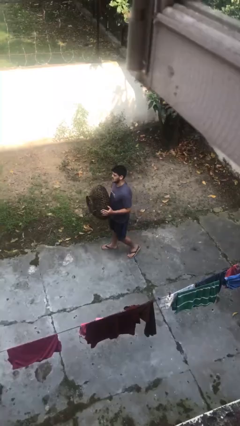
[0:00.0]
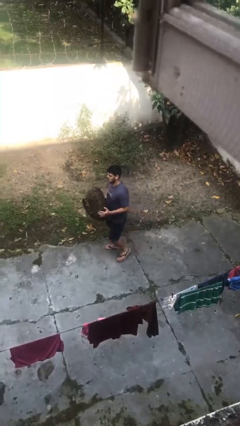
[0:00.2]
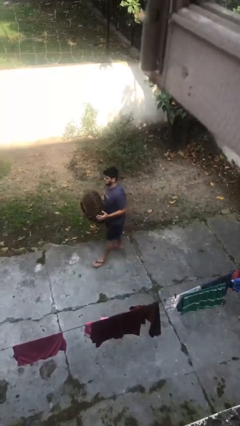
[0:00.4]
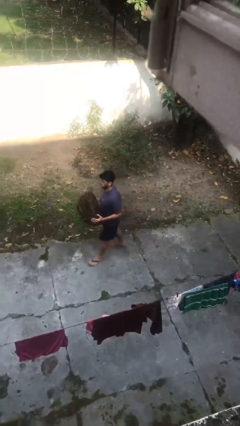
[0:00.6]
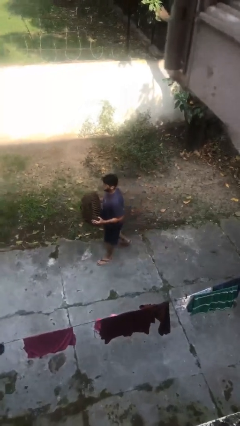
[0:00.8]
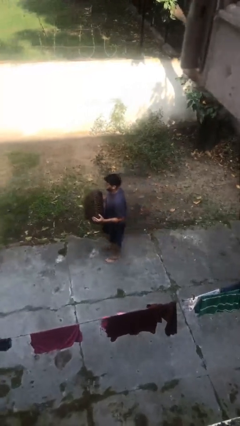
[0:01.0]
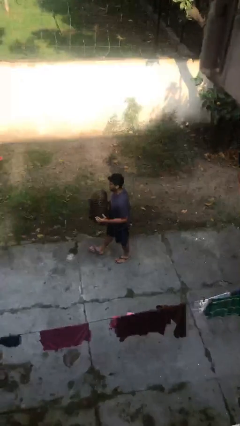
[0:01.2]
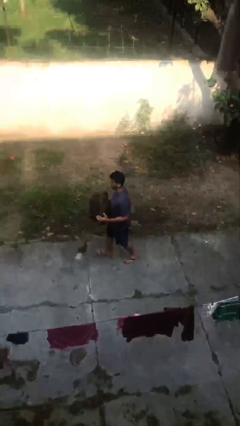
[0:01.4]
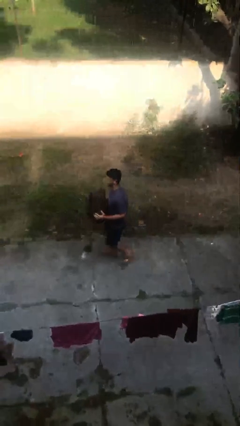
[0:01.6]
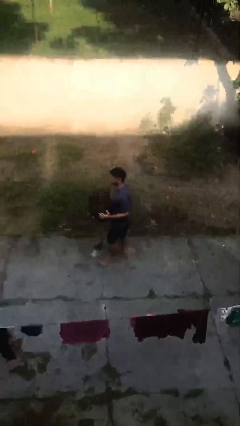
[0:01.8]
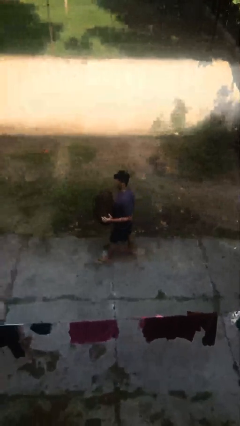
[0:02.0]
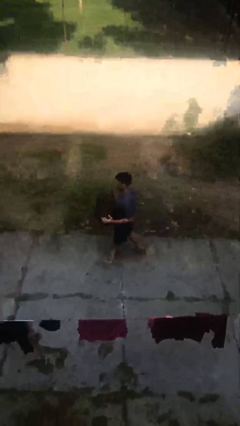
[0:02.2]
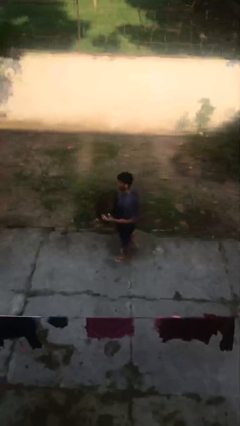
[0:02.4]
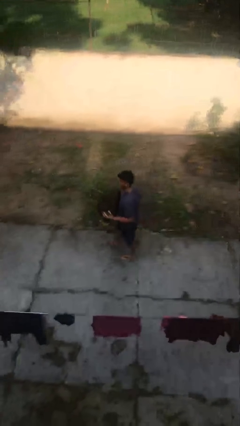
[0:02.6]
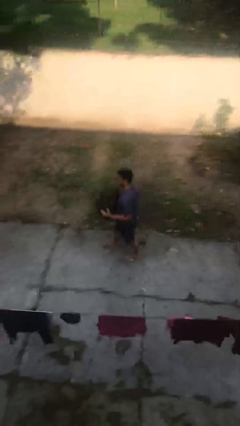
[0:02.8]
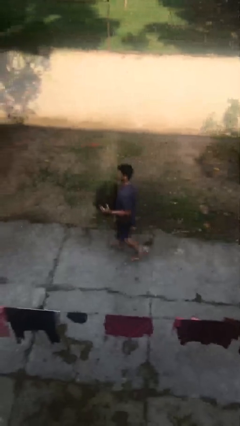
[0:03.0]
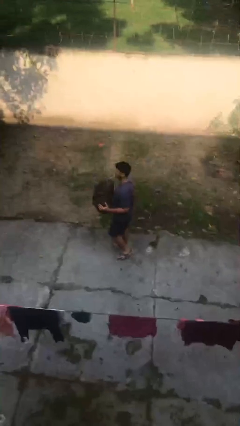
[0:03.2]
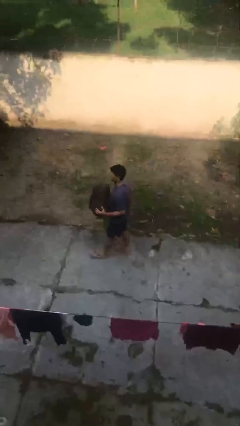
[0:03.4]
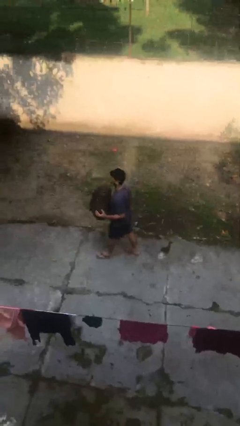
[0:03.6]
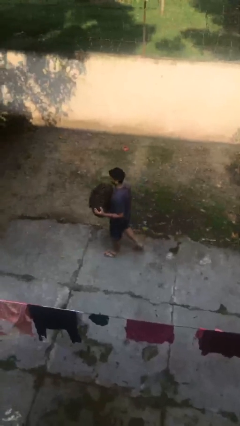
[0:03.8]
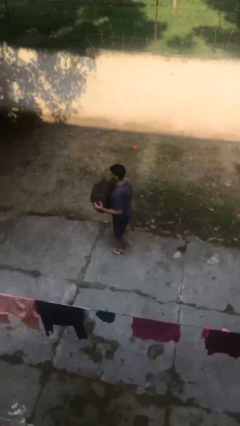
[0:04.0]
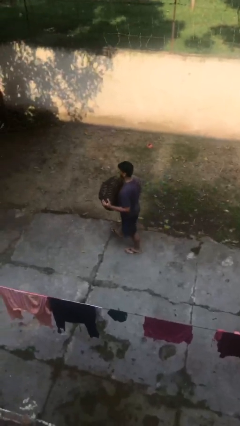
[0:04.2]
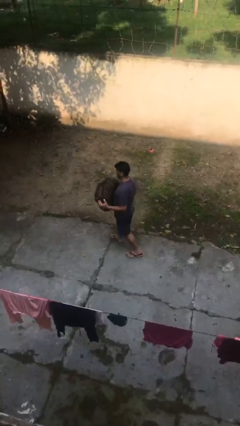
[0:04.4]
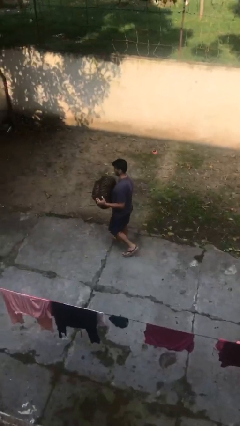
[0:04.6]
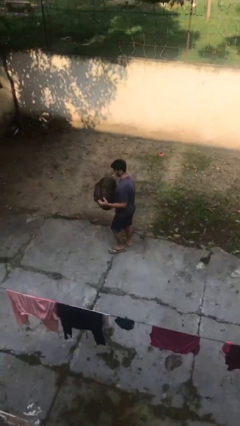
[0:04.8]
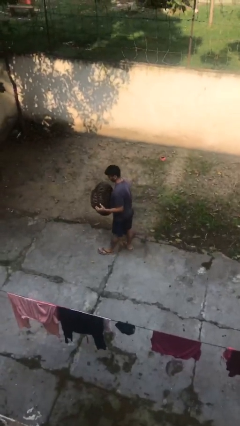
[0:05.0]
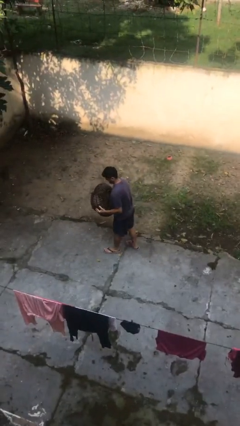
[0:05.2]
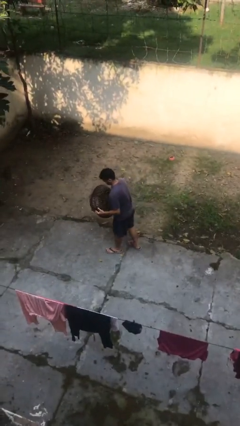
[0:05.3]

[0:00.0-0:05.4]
person carries heavy object

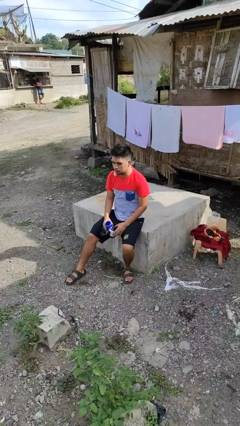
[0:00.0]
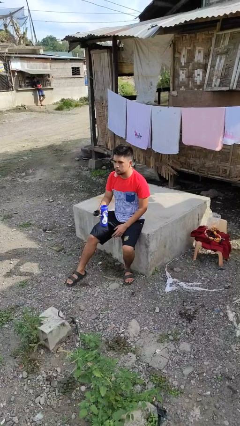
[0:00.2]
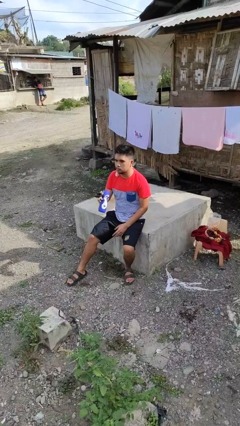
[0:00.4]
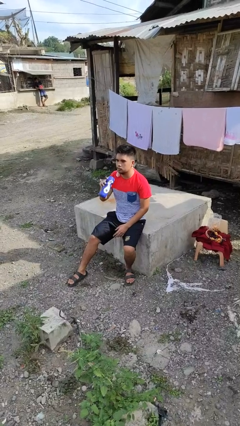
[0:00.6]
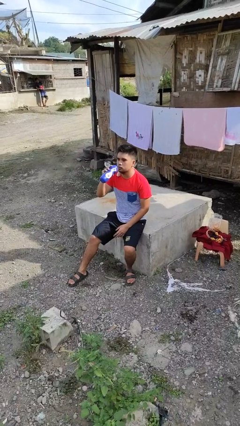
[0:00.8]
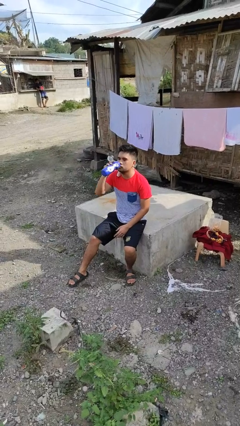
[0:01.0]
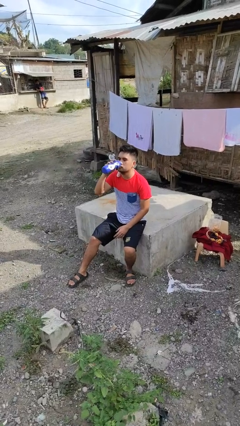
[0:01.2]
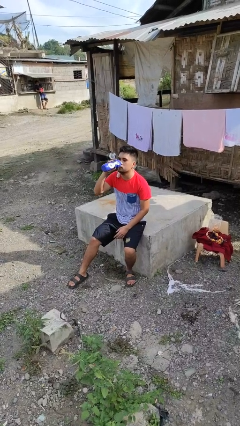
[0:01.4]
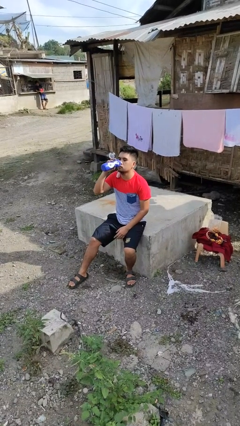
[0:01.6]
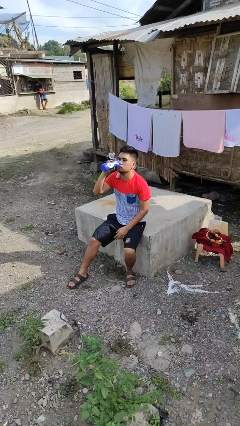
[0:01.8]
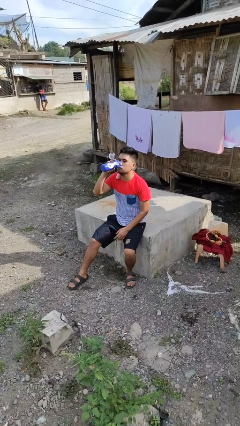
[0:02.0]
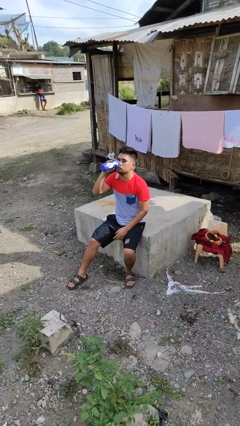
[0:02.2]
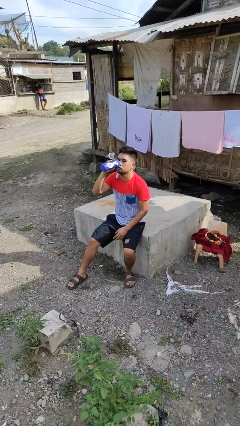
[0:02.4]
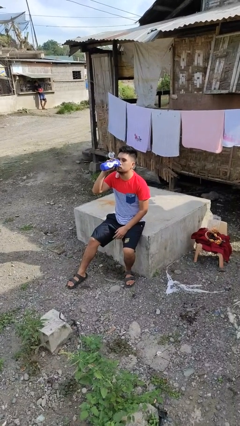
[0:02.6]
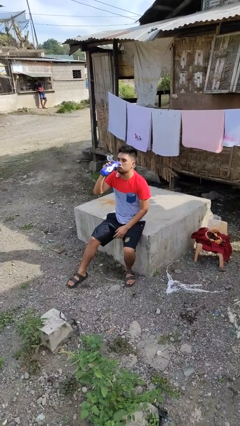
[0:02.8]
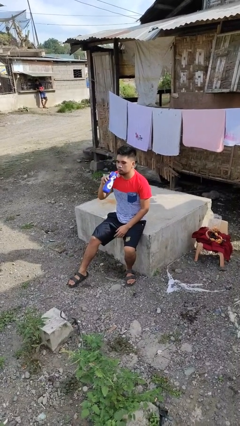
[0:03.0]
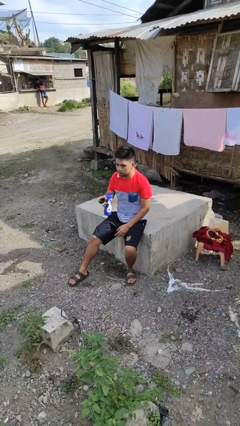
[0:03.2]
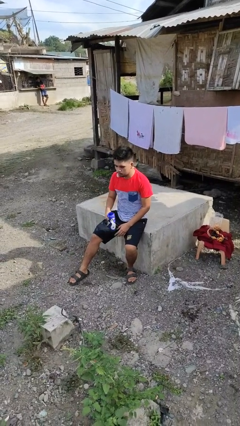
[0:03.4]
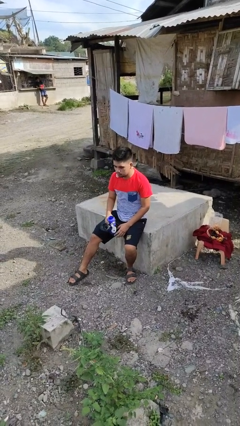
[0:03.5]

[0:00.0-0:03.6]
person drinks from bottle

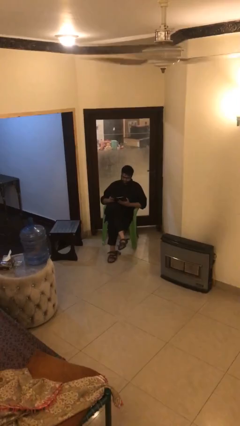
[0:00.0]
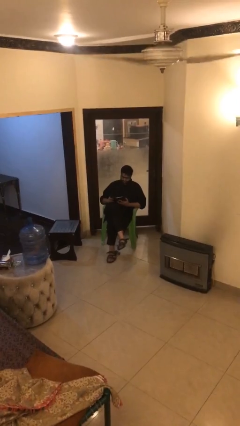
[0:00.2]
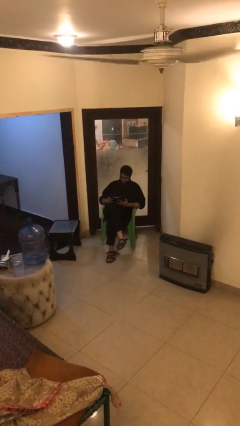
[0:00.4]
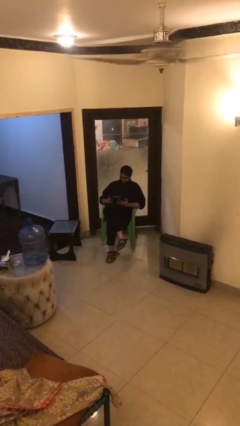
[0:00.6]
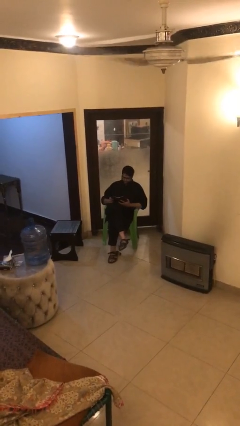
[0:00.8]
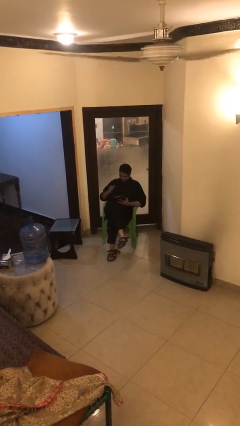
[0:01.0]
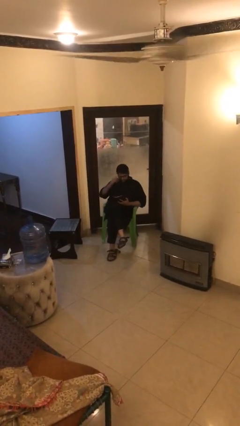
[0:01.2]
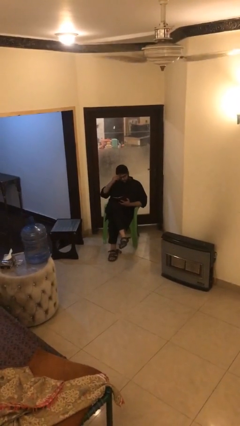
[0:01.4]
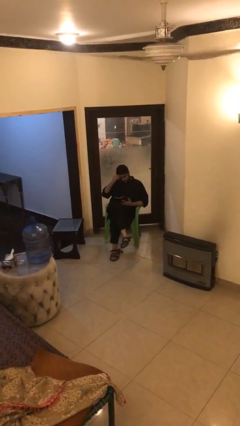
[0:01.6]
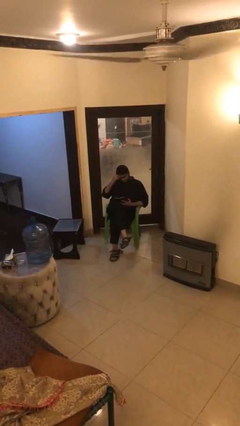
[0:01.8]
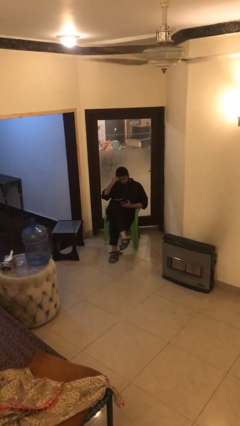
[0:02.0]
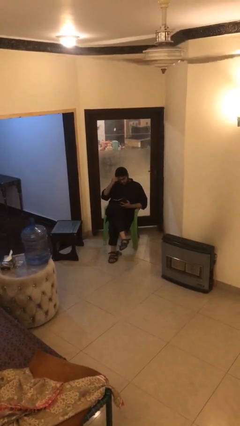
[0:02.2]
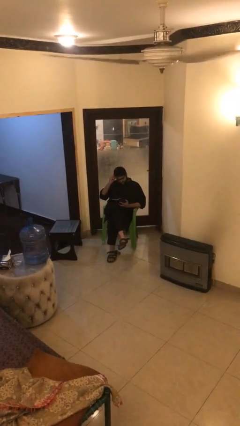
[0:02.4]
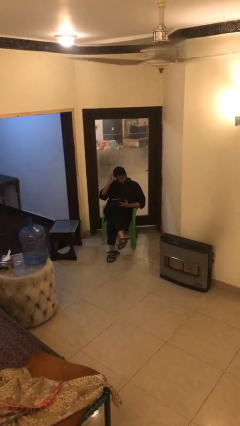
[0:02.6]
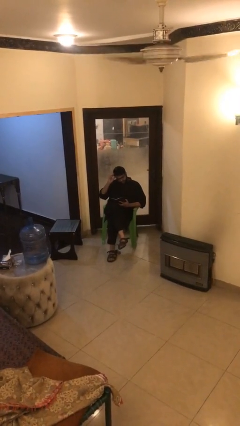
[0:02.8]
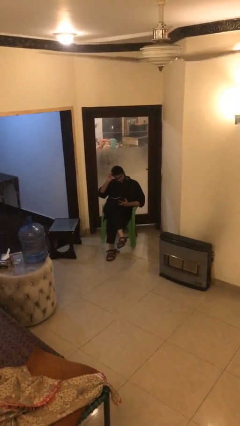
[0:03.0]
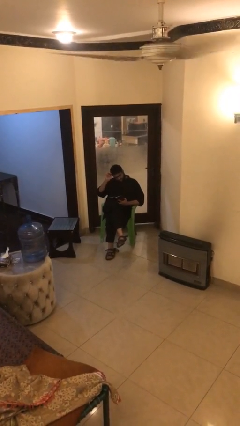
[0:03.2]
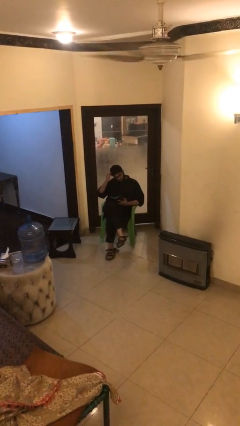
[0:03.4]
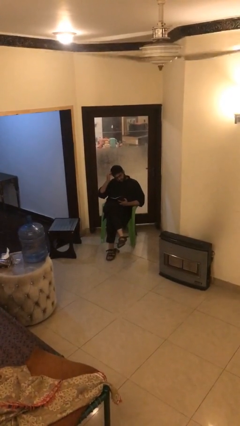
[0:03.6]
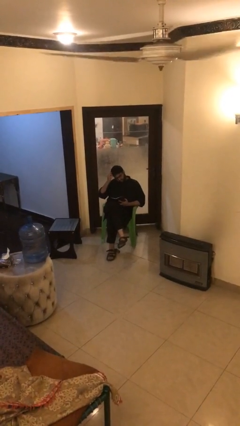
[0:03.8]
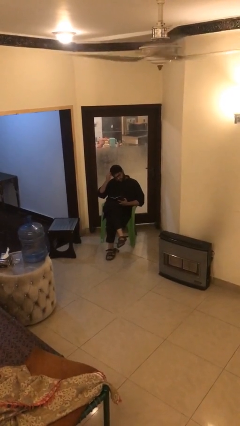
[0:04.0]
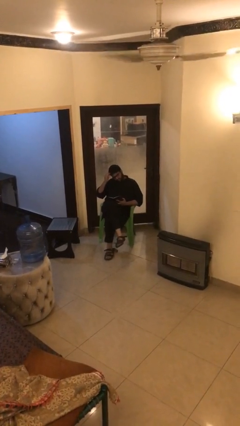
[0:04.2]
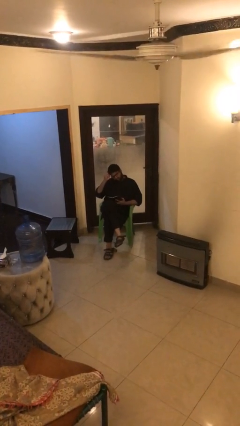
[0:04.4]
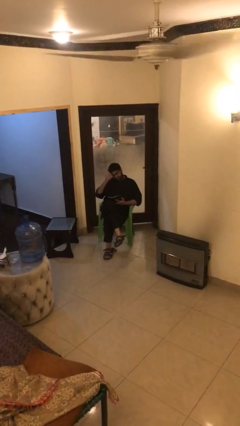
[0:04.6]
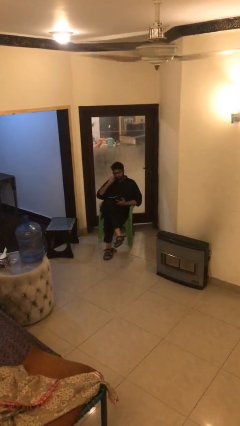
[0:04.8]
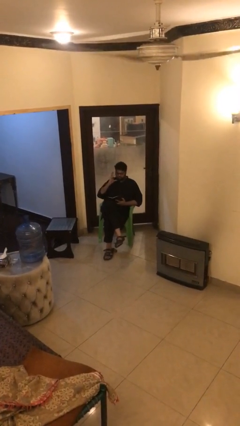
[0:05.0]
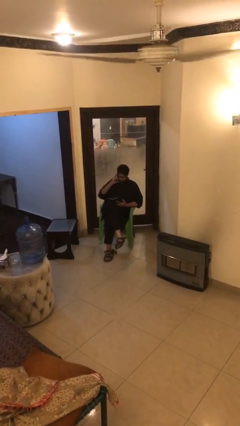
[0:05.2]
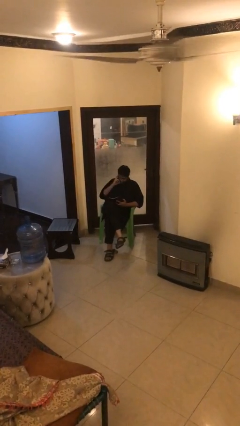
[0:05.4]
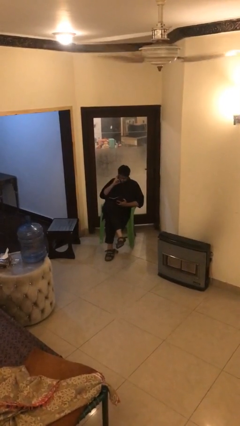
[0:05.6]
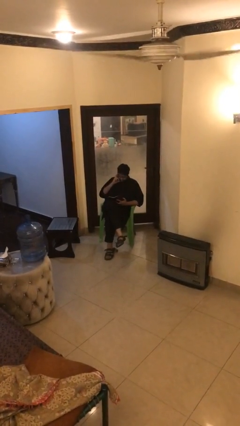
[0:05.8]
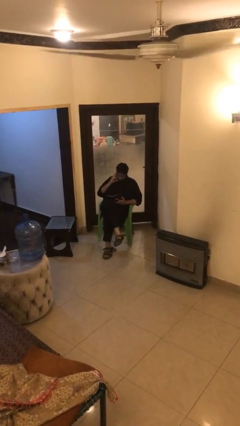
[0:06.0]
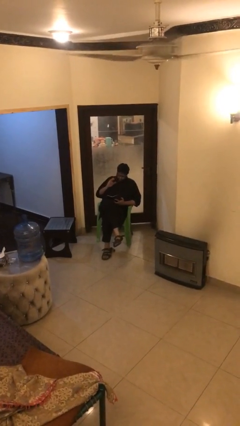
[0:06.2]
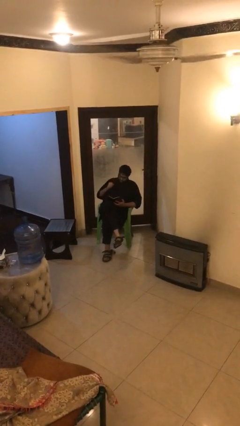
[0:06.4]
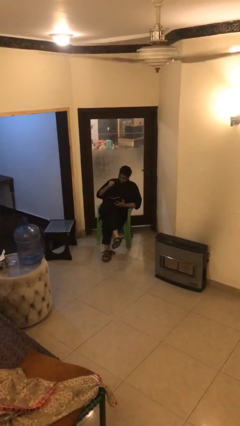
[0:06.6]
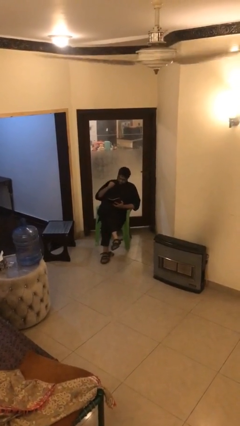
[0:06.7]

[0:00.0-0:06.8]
person reads document

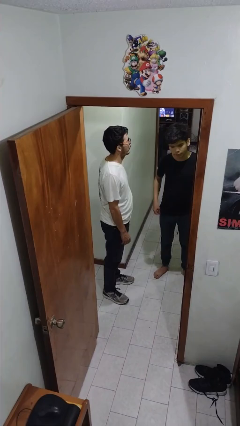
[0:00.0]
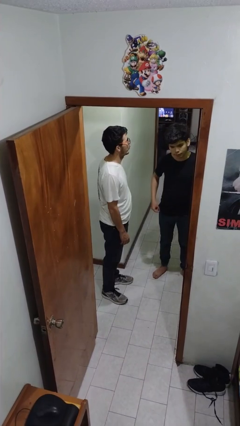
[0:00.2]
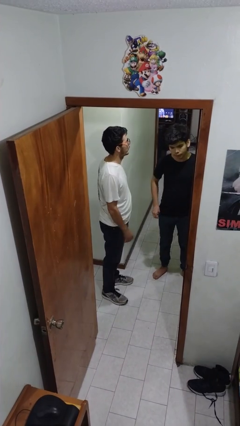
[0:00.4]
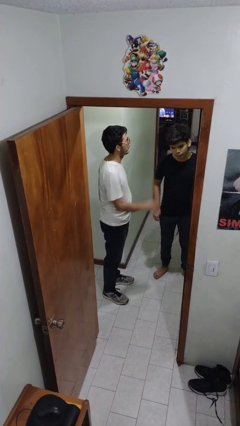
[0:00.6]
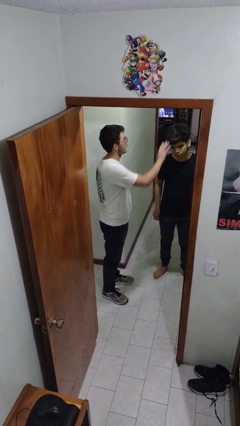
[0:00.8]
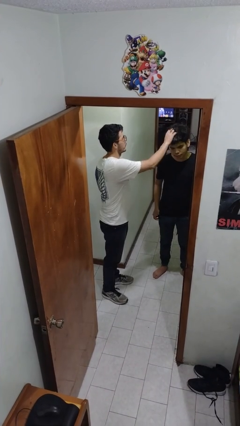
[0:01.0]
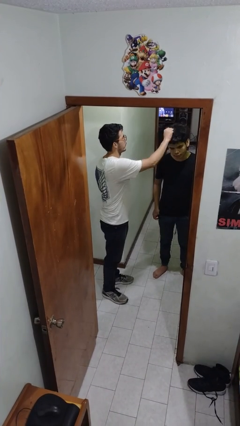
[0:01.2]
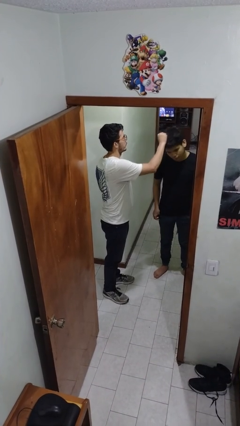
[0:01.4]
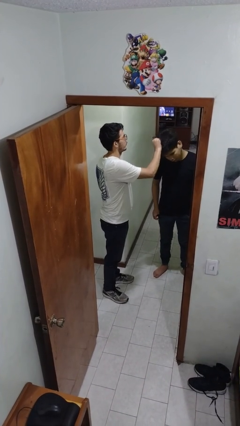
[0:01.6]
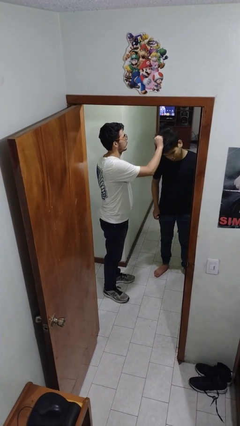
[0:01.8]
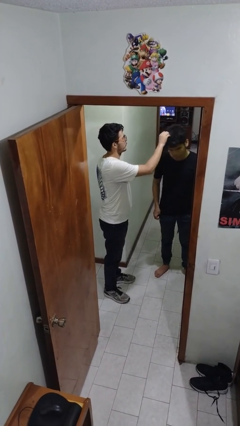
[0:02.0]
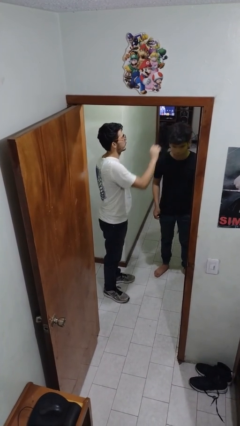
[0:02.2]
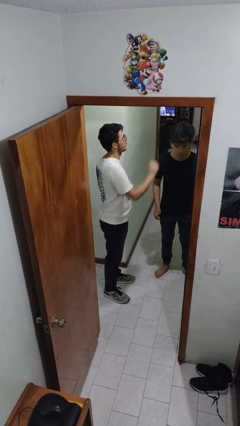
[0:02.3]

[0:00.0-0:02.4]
person grabs person by hair
